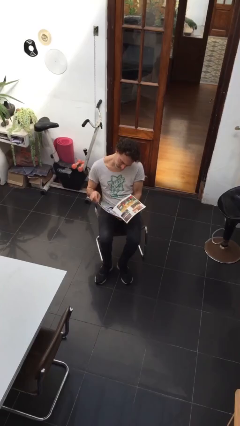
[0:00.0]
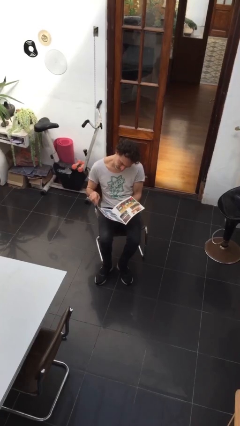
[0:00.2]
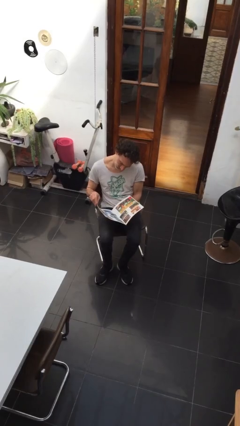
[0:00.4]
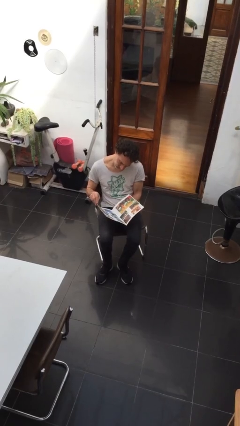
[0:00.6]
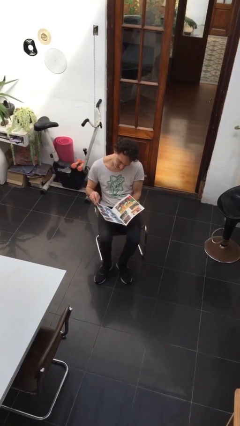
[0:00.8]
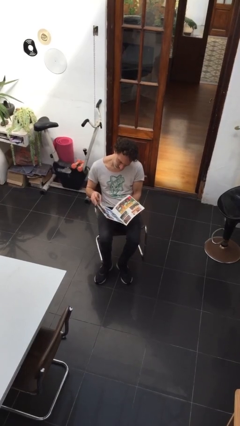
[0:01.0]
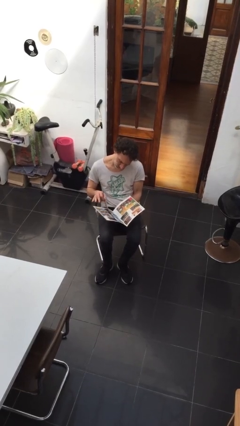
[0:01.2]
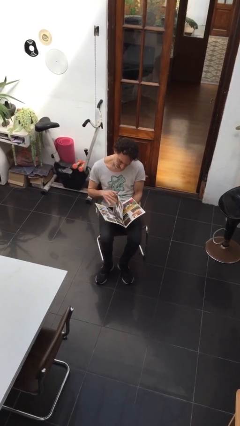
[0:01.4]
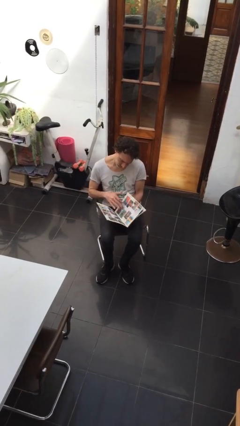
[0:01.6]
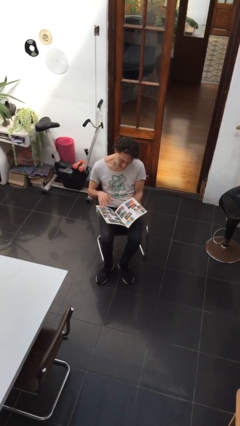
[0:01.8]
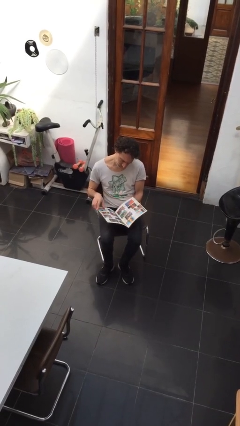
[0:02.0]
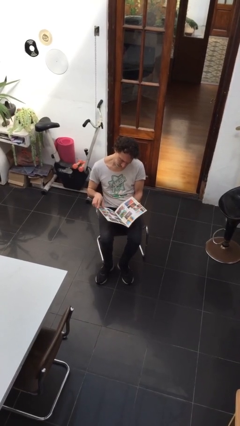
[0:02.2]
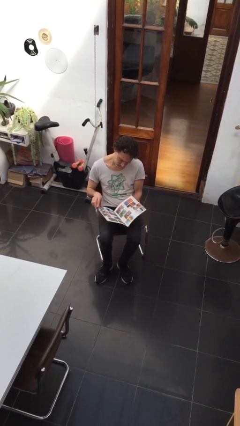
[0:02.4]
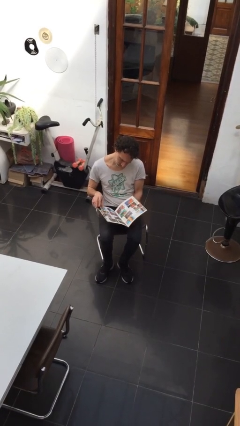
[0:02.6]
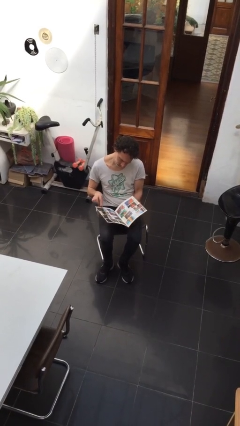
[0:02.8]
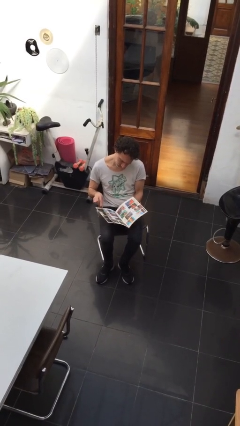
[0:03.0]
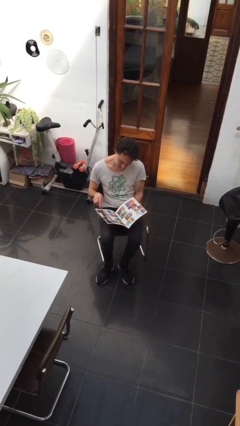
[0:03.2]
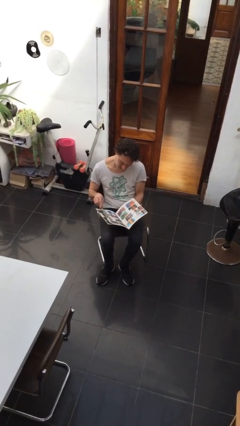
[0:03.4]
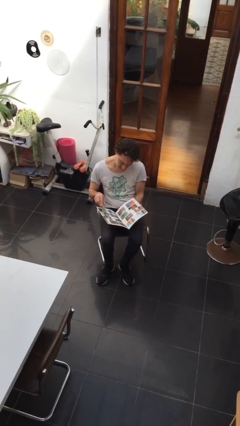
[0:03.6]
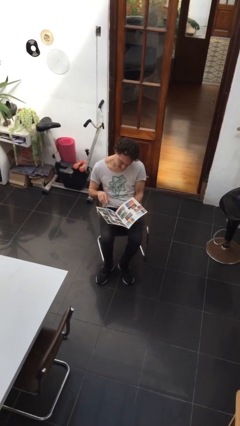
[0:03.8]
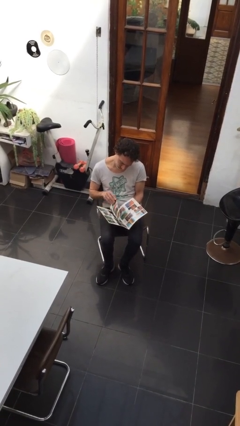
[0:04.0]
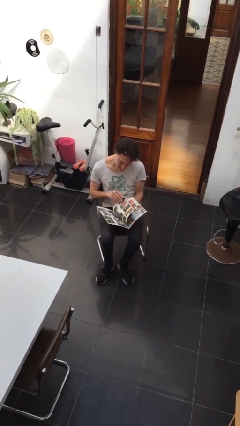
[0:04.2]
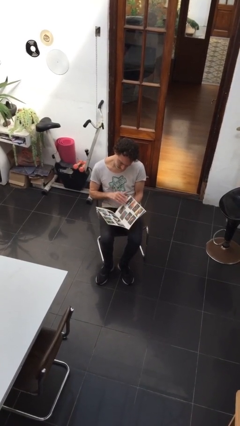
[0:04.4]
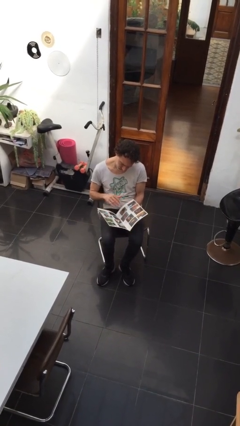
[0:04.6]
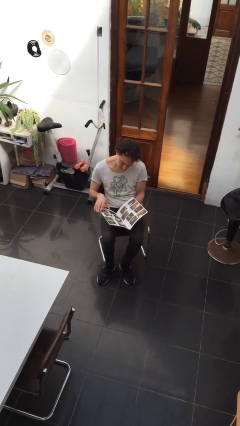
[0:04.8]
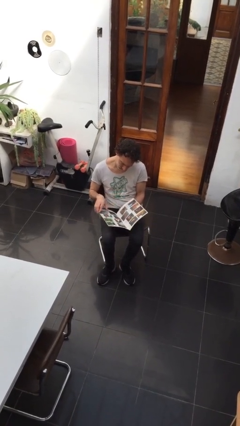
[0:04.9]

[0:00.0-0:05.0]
person reads document

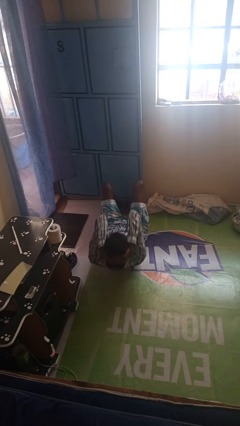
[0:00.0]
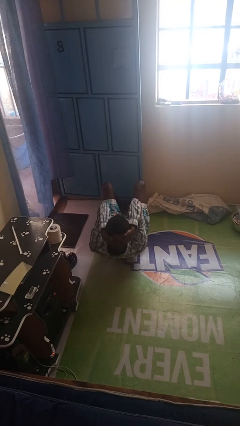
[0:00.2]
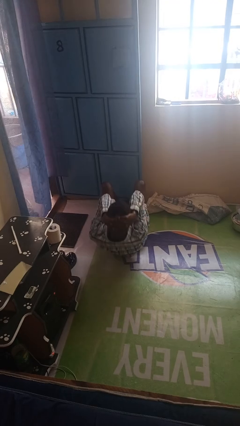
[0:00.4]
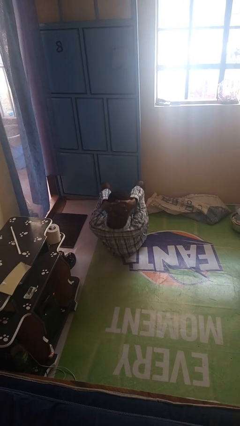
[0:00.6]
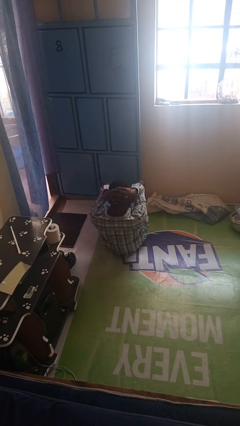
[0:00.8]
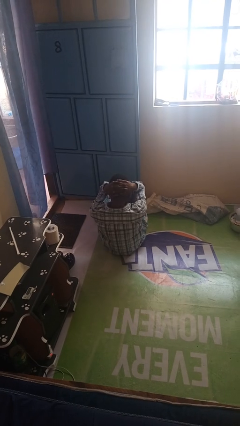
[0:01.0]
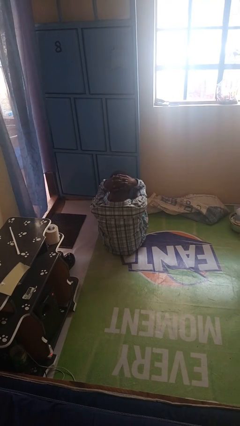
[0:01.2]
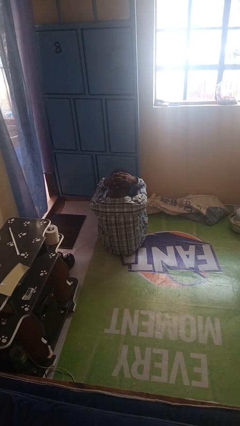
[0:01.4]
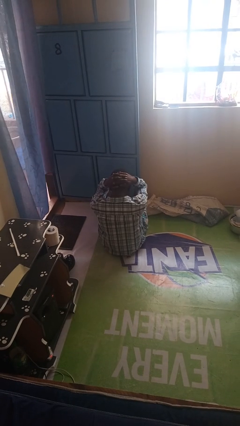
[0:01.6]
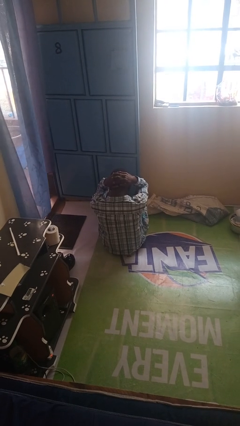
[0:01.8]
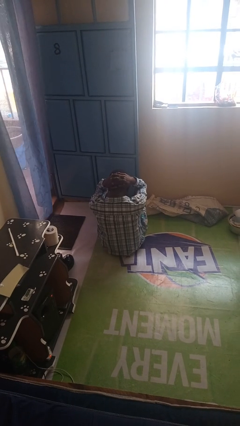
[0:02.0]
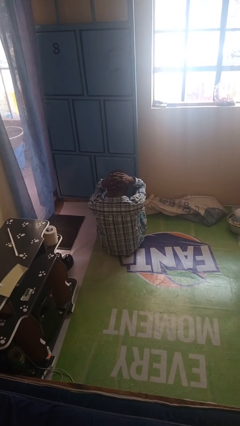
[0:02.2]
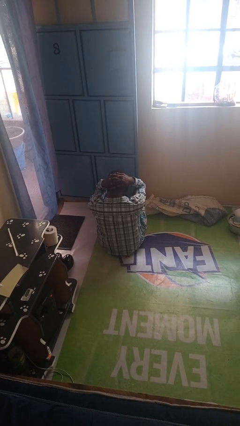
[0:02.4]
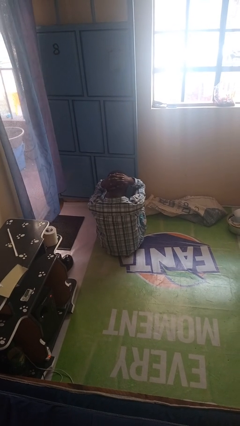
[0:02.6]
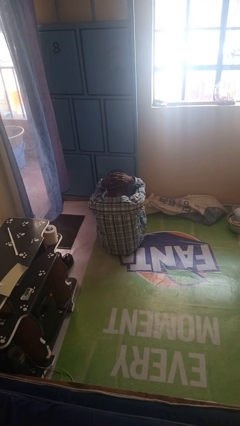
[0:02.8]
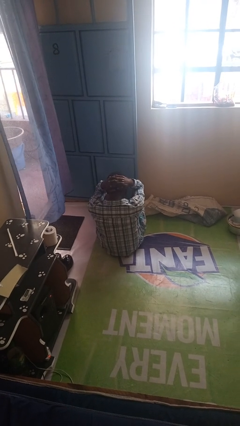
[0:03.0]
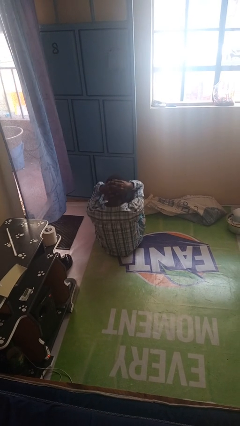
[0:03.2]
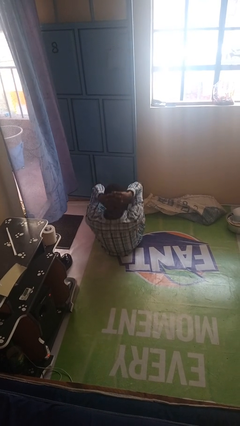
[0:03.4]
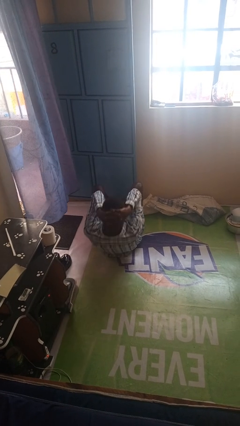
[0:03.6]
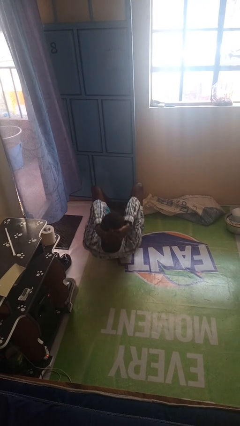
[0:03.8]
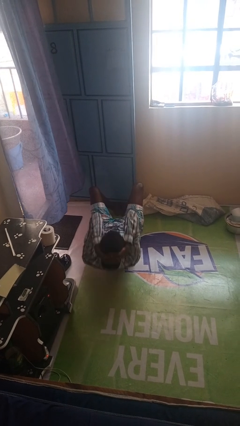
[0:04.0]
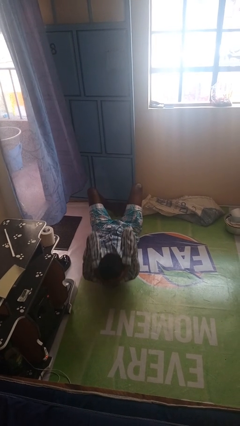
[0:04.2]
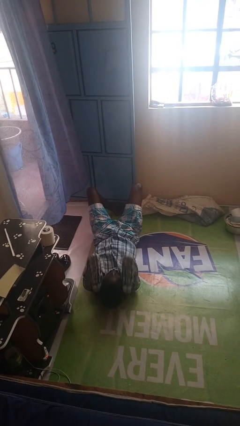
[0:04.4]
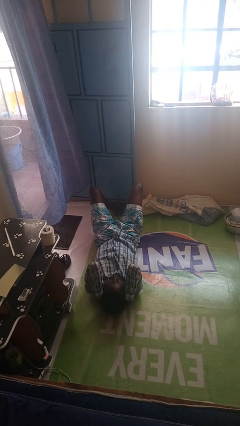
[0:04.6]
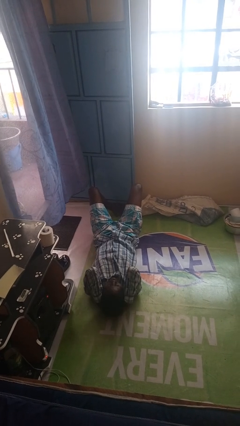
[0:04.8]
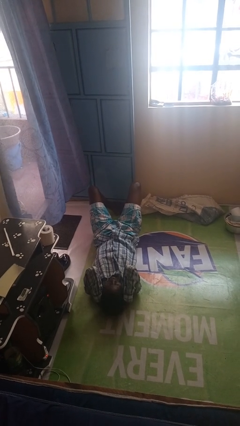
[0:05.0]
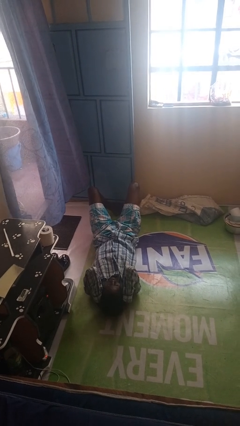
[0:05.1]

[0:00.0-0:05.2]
person exercises with situp

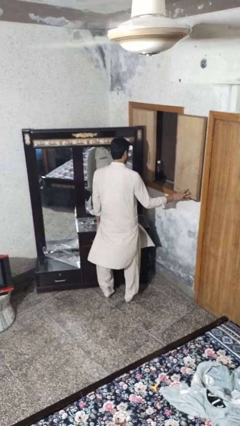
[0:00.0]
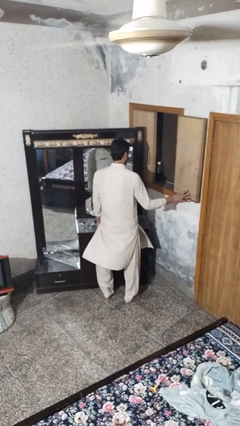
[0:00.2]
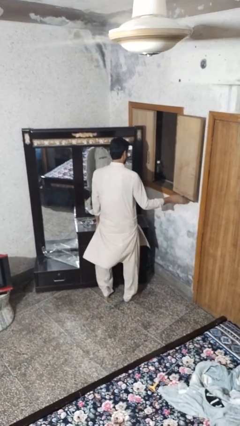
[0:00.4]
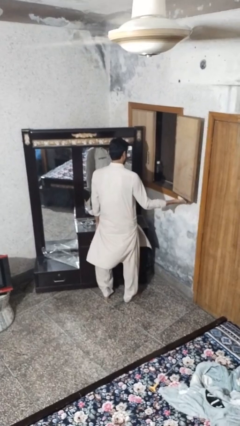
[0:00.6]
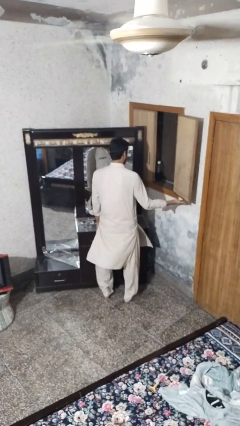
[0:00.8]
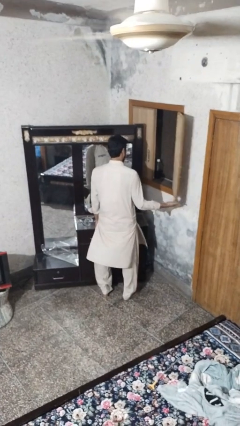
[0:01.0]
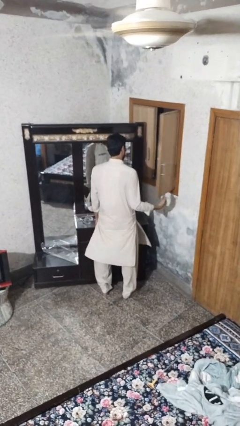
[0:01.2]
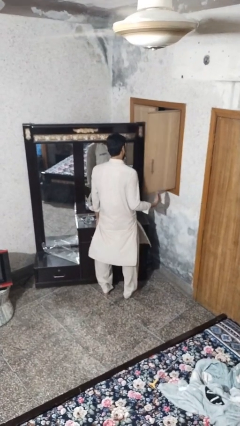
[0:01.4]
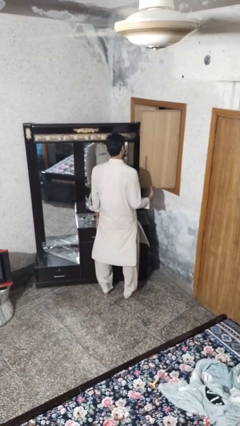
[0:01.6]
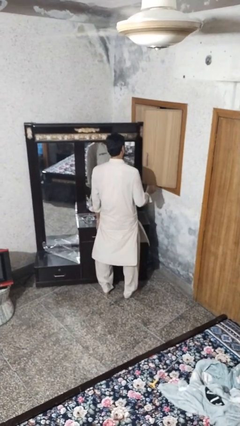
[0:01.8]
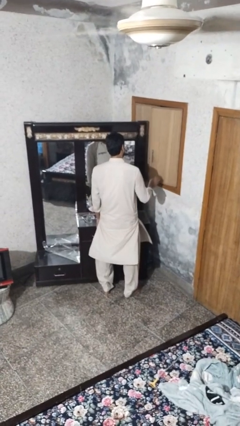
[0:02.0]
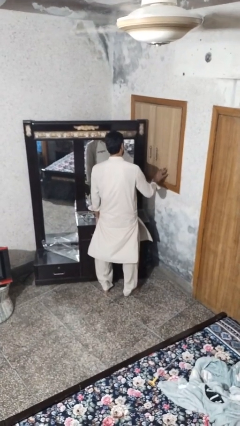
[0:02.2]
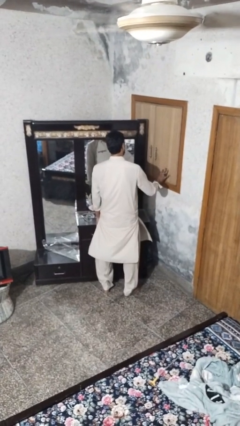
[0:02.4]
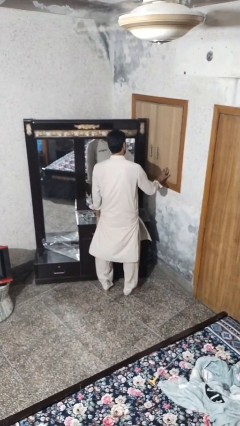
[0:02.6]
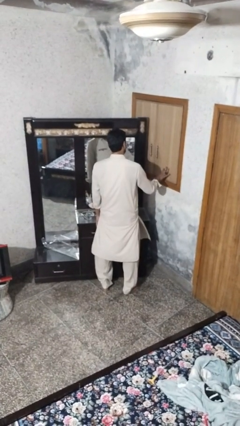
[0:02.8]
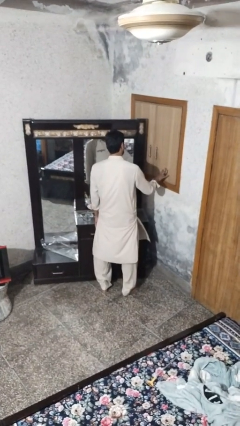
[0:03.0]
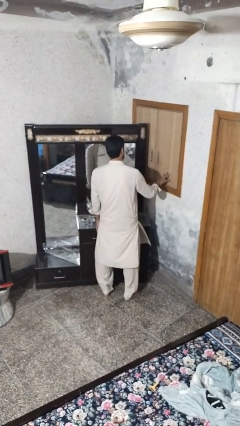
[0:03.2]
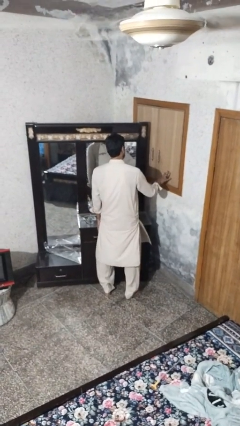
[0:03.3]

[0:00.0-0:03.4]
person closes home window

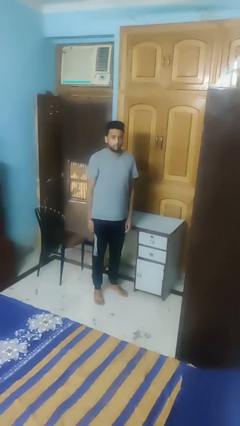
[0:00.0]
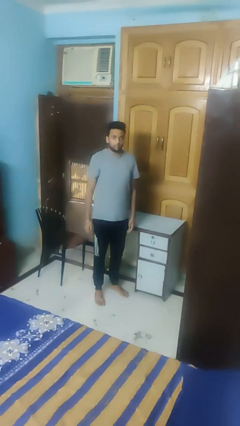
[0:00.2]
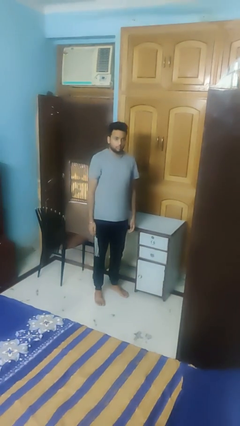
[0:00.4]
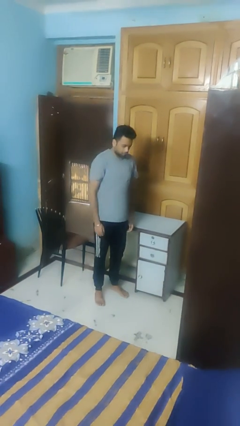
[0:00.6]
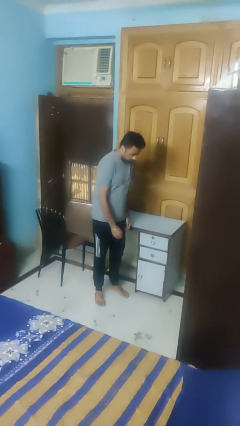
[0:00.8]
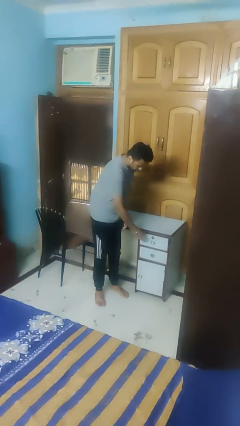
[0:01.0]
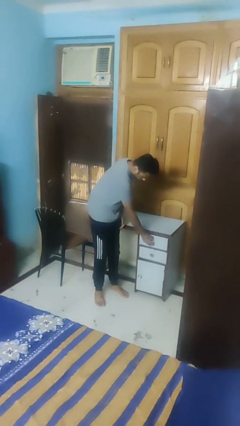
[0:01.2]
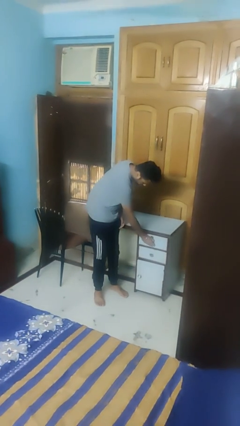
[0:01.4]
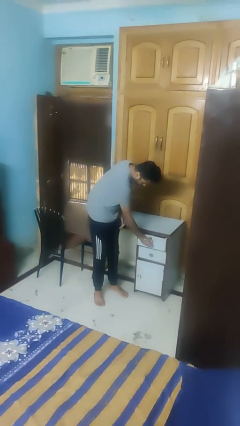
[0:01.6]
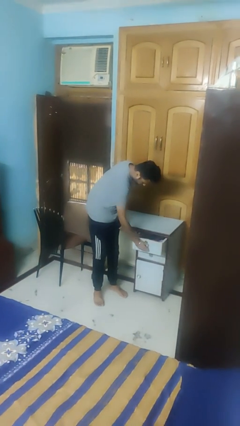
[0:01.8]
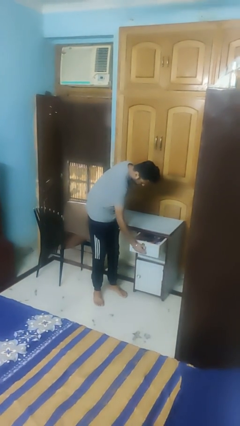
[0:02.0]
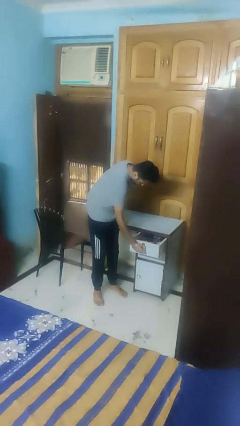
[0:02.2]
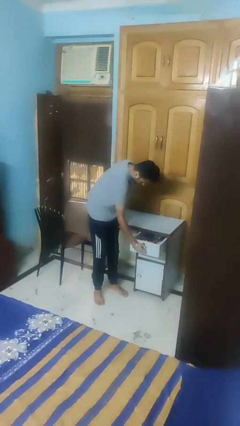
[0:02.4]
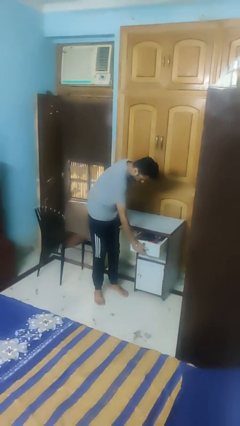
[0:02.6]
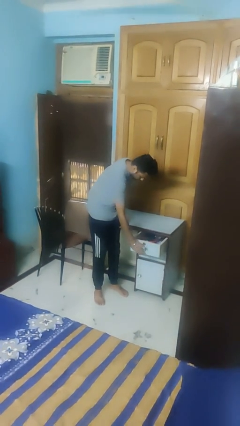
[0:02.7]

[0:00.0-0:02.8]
person opens dresser drawer

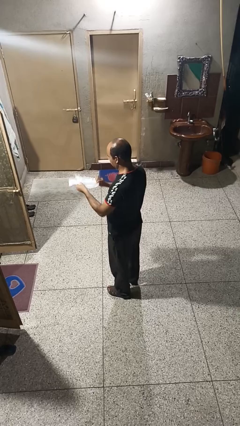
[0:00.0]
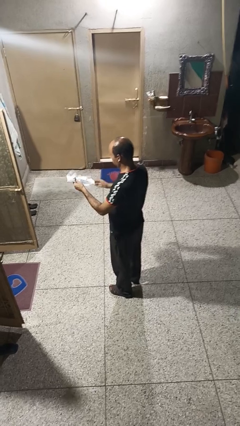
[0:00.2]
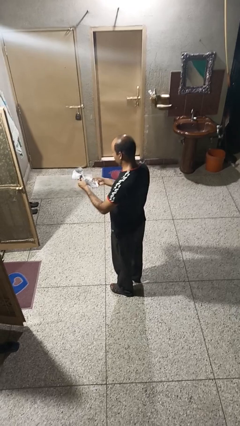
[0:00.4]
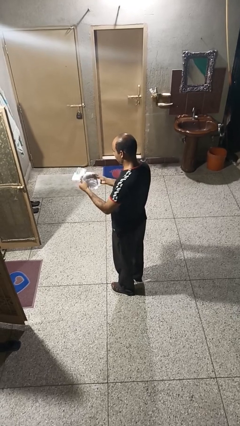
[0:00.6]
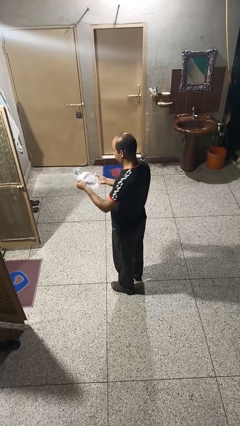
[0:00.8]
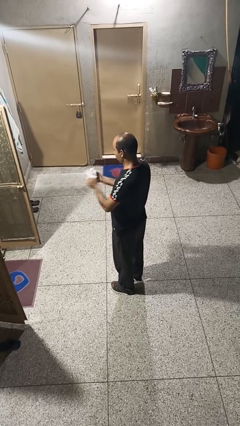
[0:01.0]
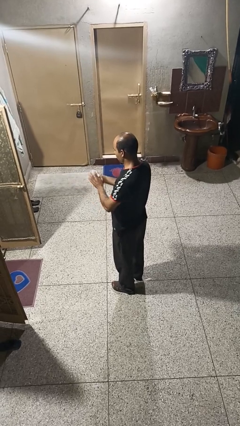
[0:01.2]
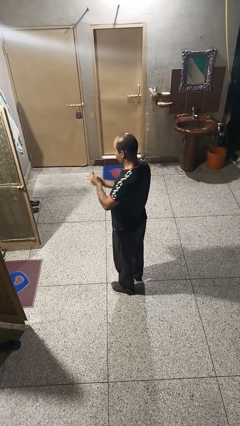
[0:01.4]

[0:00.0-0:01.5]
person crumples paper
